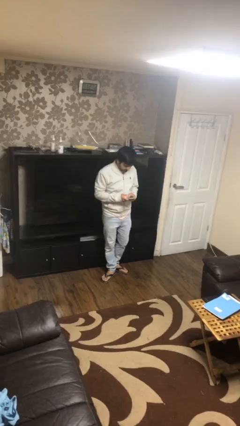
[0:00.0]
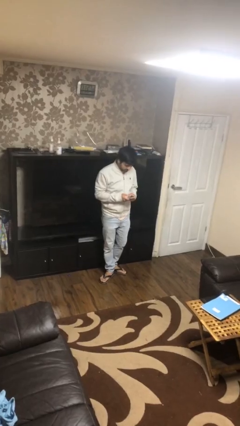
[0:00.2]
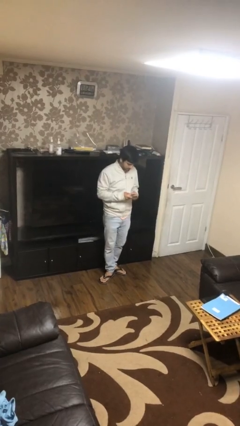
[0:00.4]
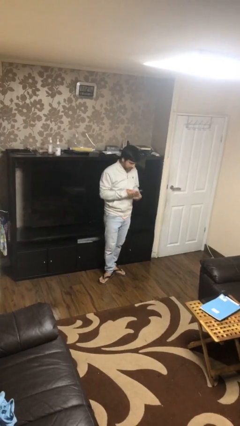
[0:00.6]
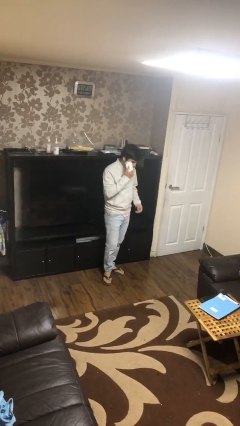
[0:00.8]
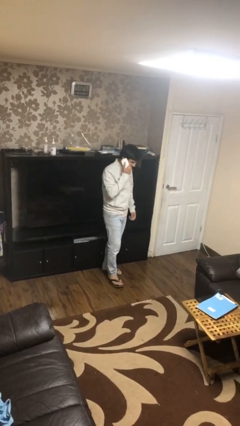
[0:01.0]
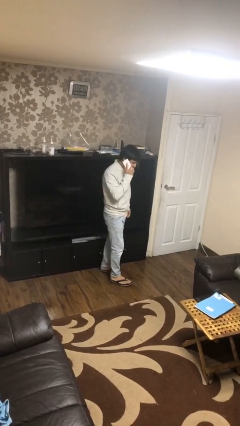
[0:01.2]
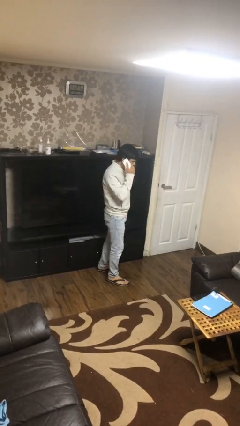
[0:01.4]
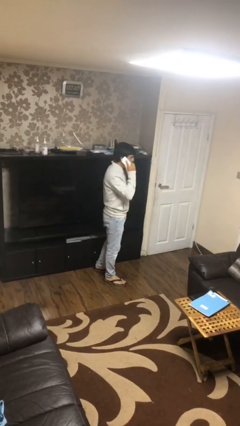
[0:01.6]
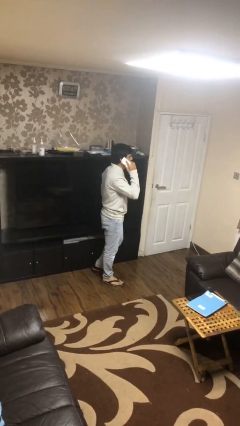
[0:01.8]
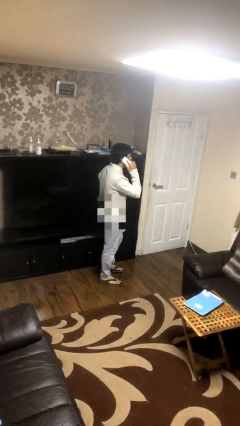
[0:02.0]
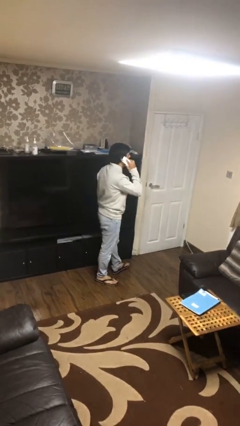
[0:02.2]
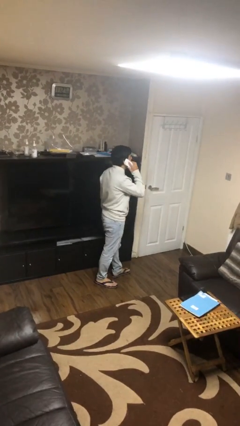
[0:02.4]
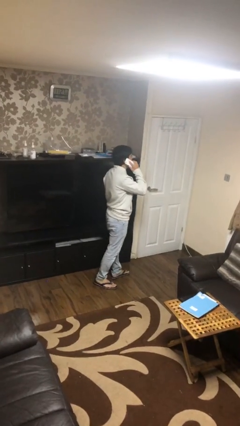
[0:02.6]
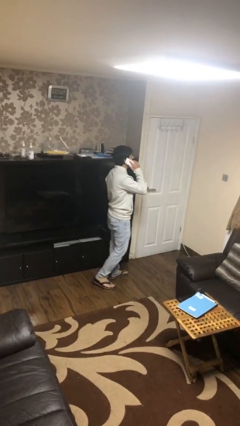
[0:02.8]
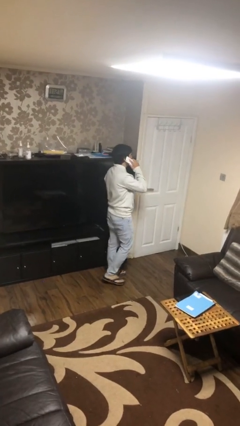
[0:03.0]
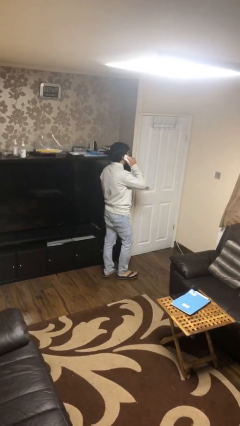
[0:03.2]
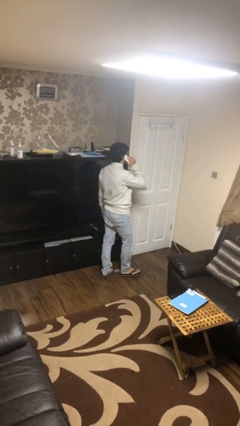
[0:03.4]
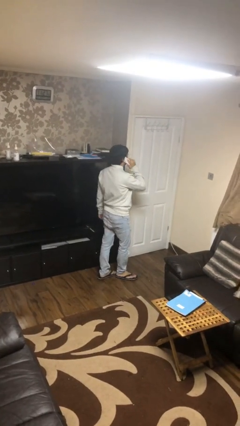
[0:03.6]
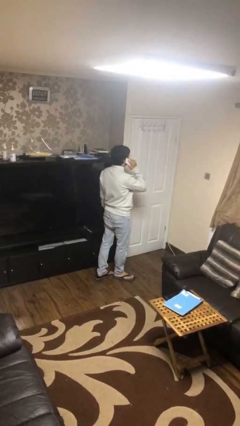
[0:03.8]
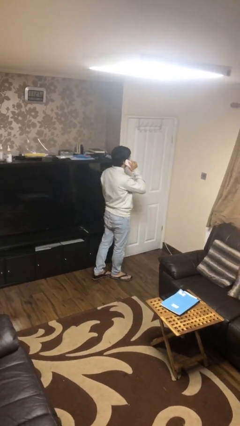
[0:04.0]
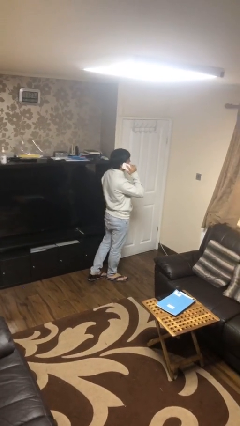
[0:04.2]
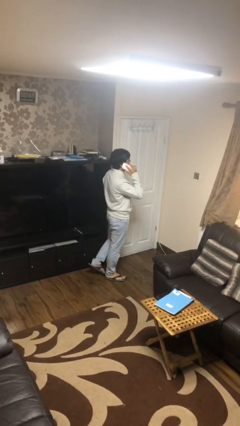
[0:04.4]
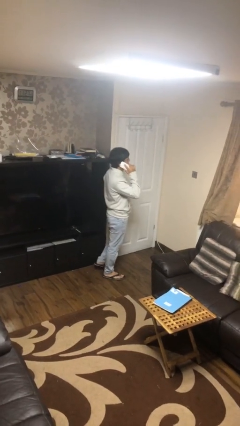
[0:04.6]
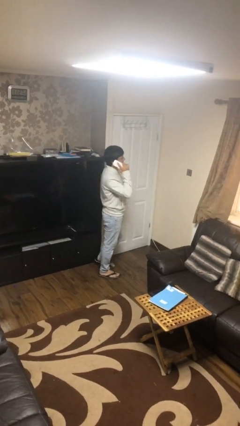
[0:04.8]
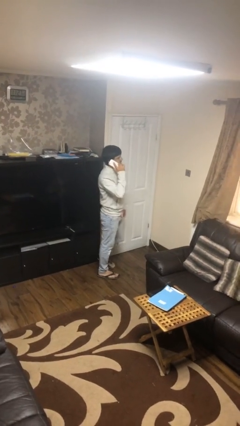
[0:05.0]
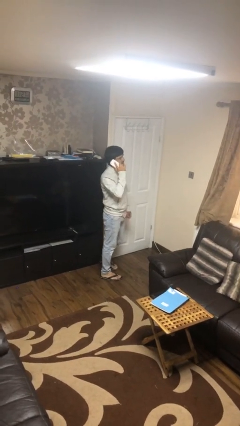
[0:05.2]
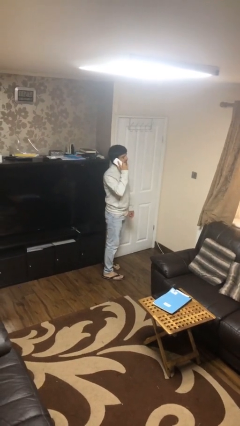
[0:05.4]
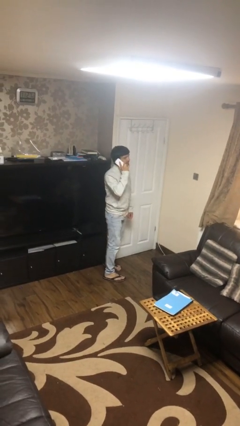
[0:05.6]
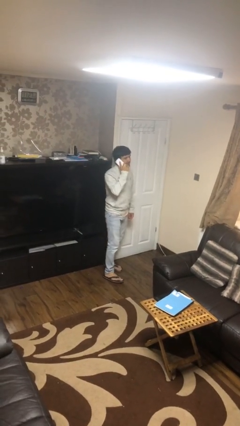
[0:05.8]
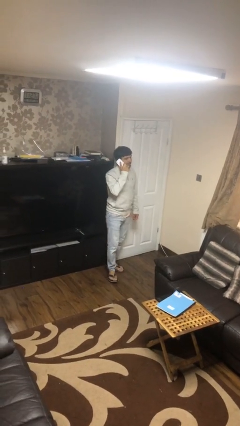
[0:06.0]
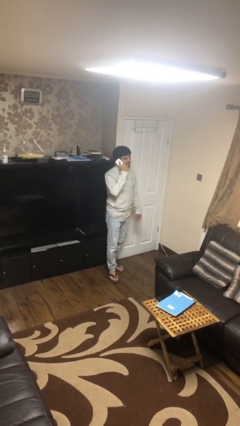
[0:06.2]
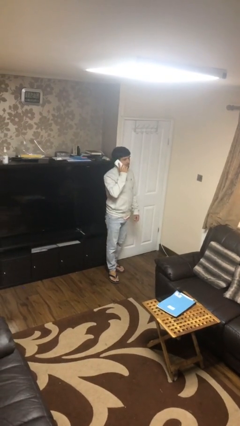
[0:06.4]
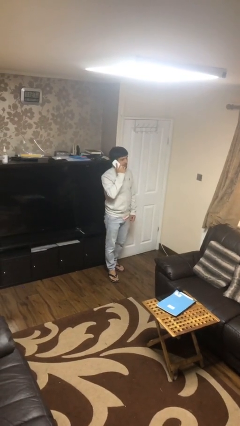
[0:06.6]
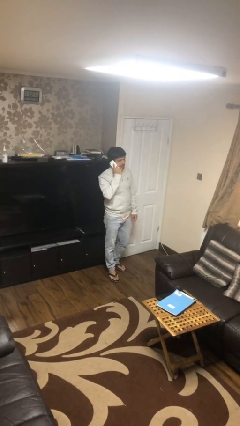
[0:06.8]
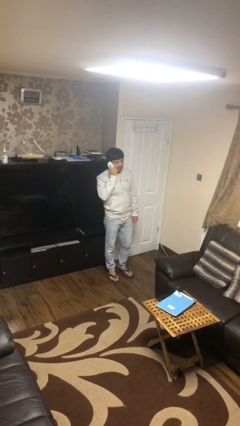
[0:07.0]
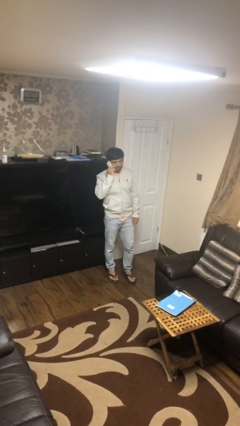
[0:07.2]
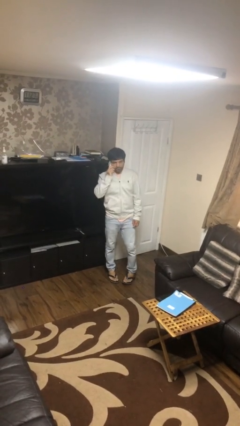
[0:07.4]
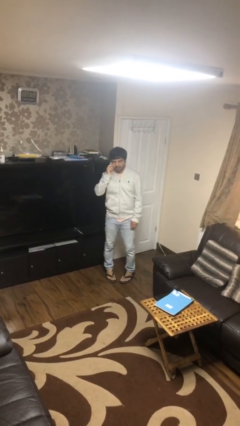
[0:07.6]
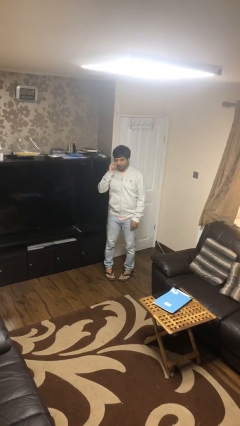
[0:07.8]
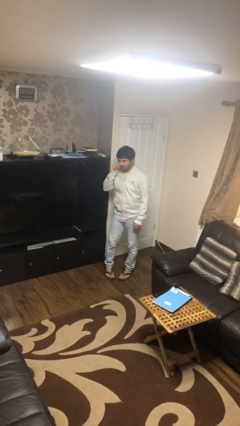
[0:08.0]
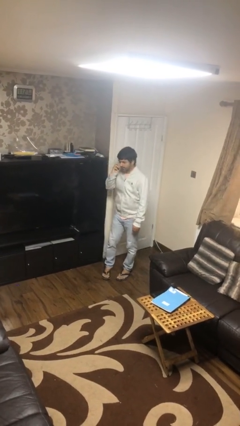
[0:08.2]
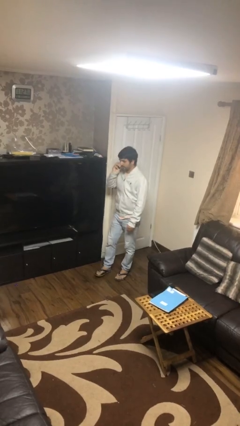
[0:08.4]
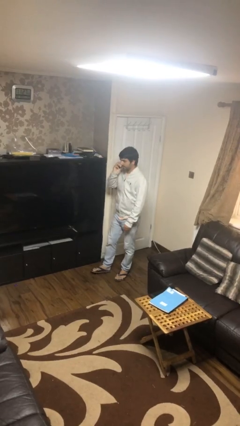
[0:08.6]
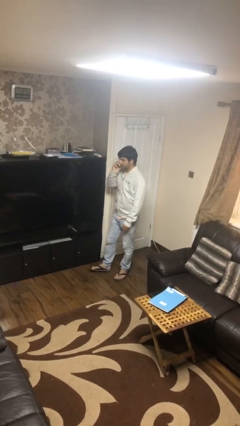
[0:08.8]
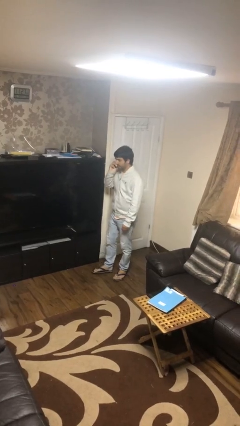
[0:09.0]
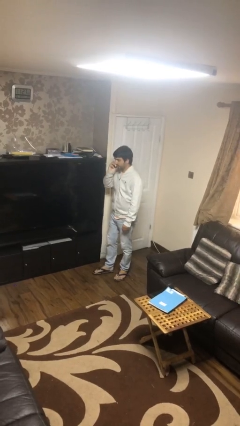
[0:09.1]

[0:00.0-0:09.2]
person talks on phone

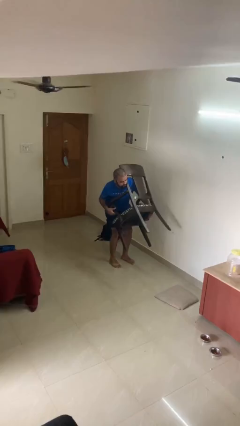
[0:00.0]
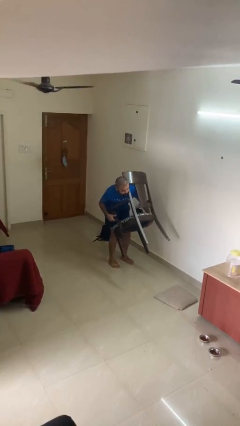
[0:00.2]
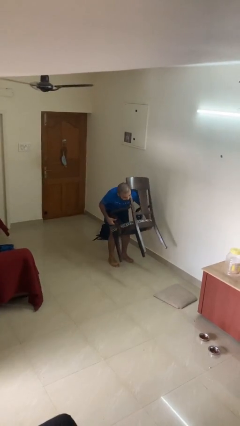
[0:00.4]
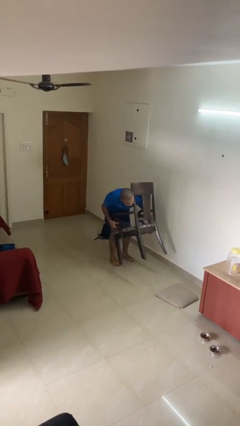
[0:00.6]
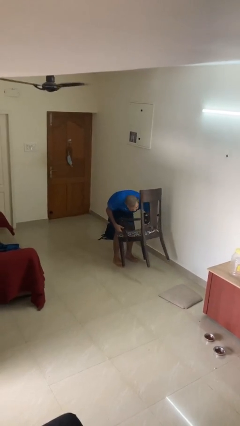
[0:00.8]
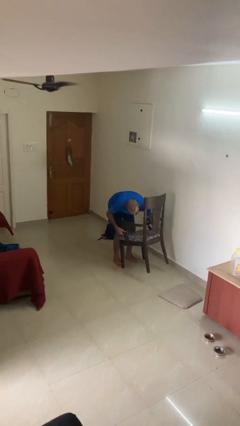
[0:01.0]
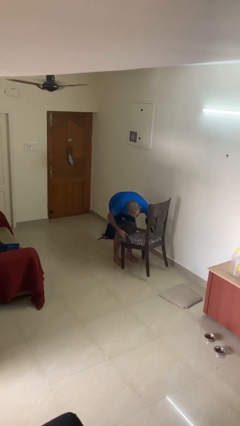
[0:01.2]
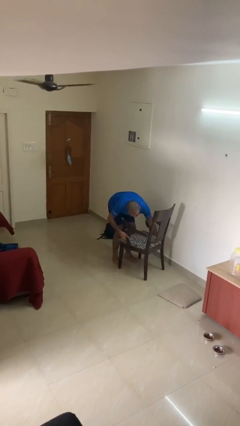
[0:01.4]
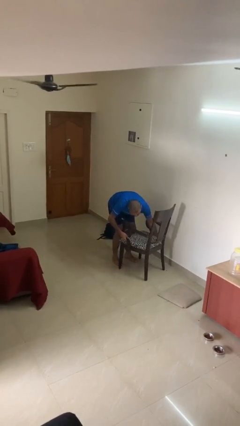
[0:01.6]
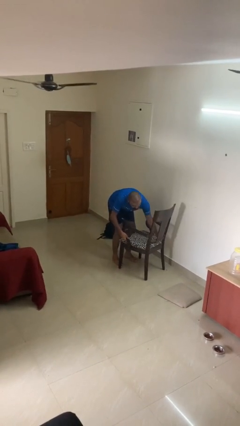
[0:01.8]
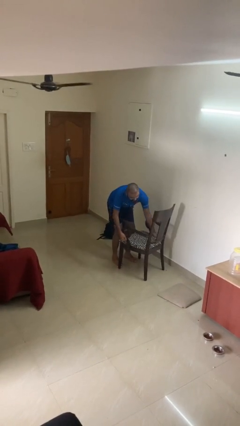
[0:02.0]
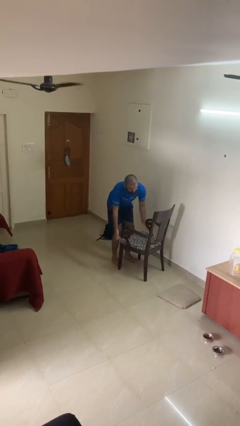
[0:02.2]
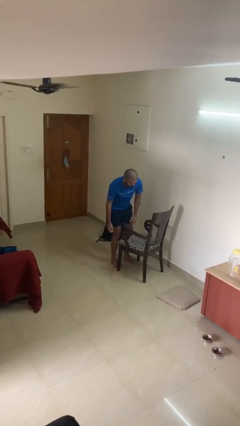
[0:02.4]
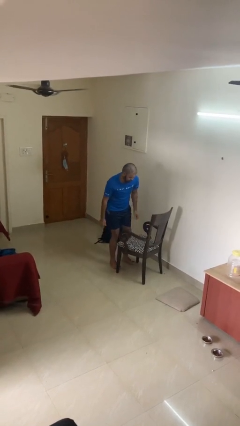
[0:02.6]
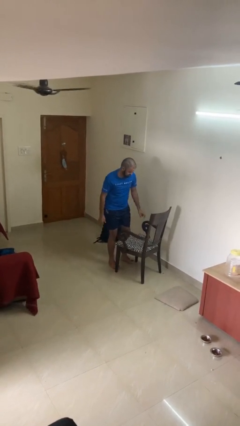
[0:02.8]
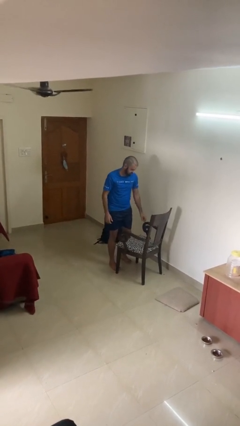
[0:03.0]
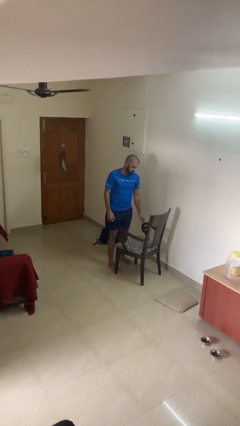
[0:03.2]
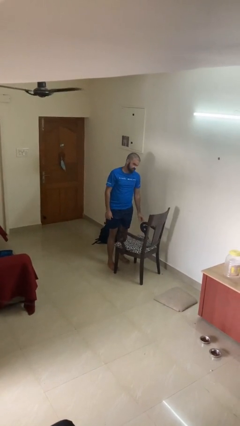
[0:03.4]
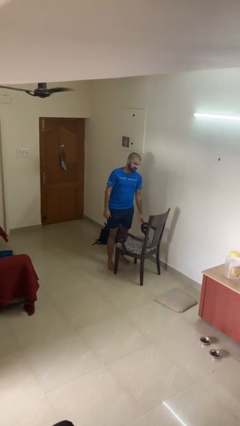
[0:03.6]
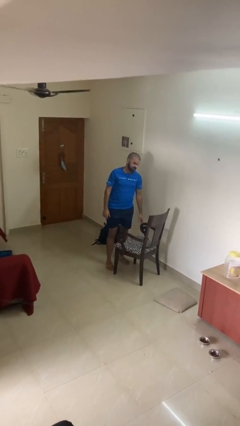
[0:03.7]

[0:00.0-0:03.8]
person puts down object on floor

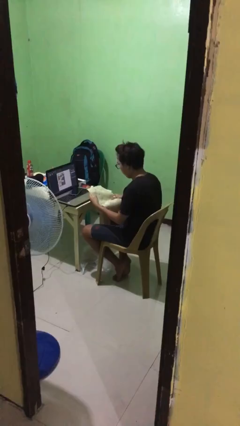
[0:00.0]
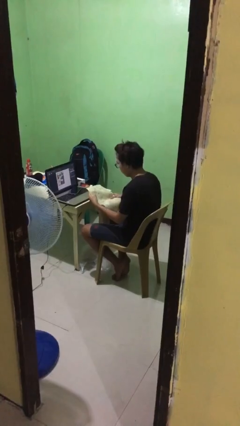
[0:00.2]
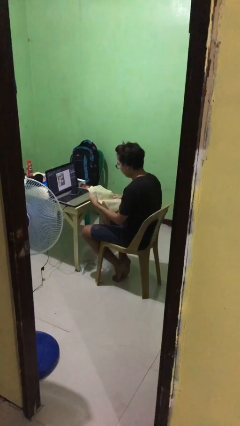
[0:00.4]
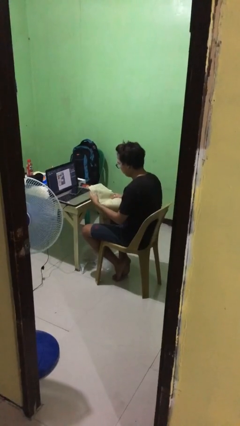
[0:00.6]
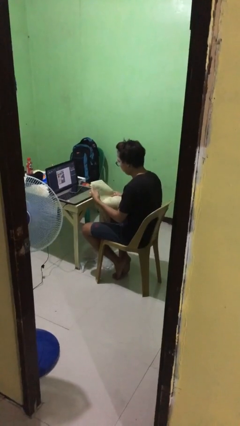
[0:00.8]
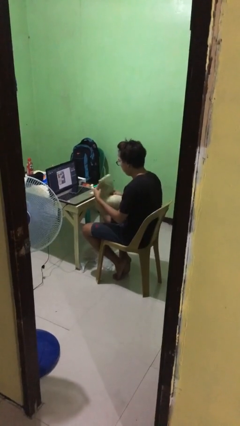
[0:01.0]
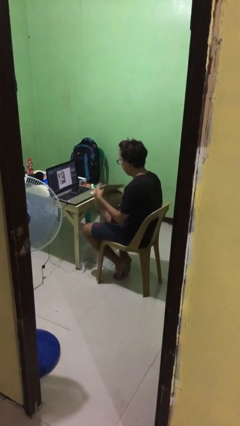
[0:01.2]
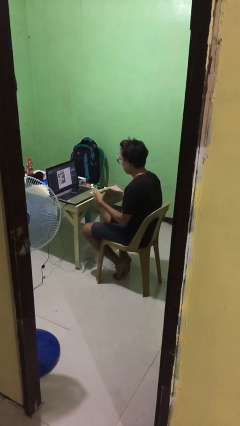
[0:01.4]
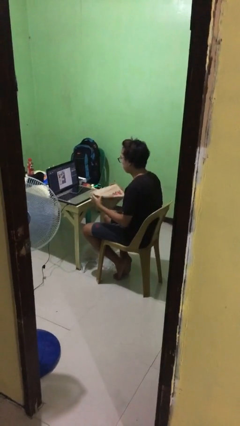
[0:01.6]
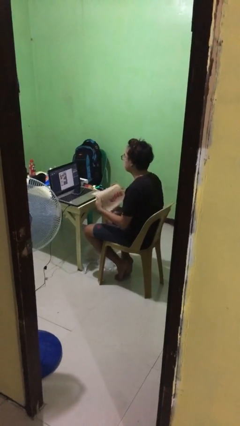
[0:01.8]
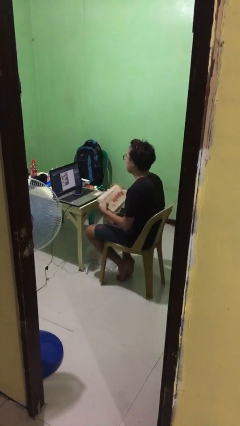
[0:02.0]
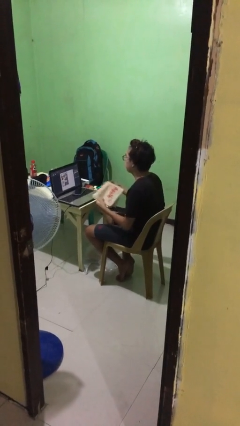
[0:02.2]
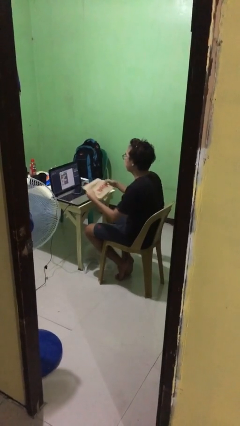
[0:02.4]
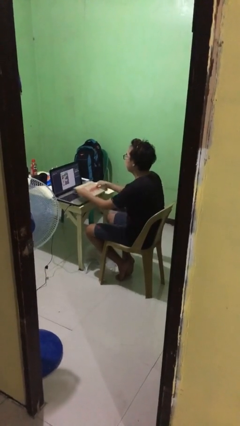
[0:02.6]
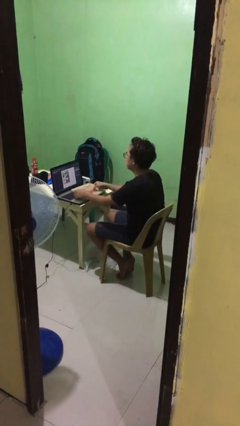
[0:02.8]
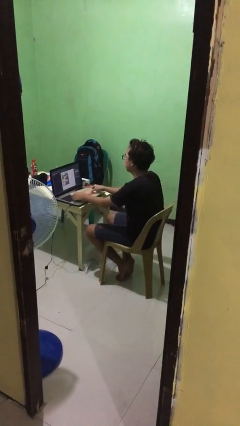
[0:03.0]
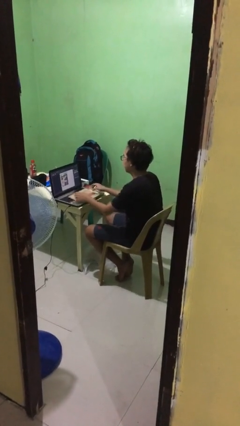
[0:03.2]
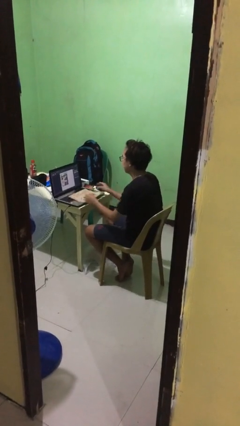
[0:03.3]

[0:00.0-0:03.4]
person puts down object on table

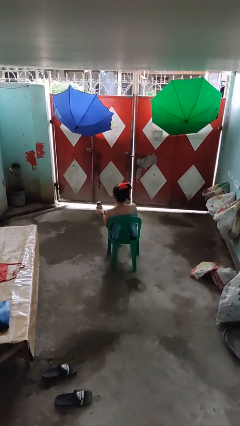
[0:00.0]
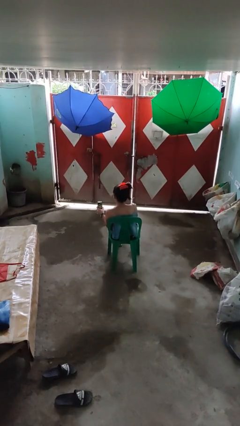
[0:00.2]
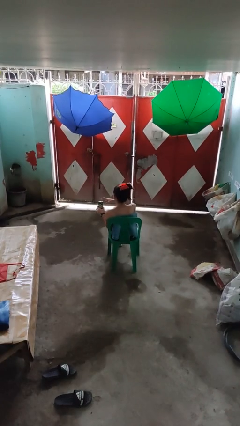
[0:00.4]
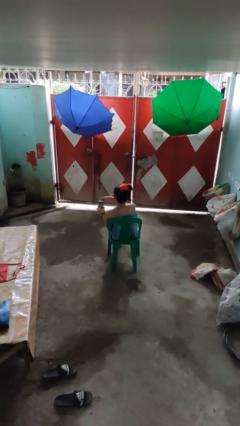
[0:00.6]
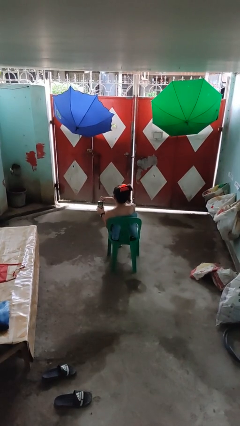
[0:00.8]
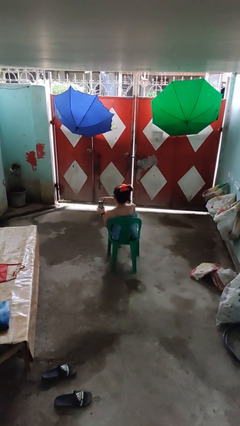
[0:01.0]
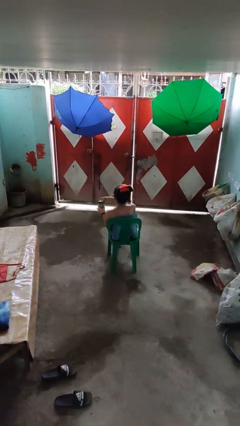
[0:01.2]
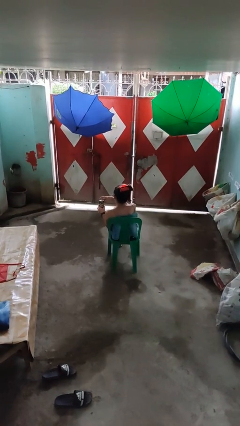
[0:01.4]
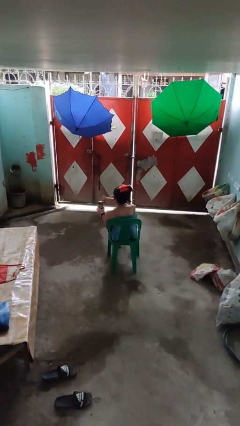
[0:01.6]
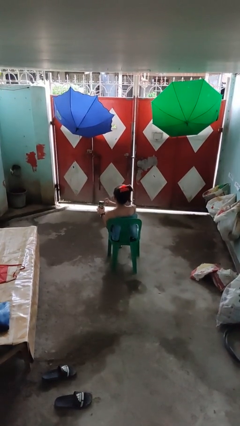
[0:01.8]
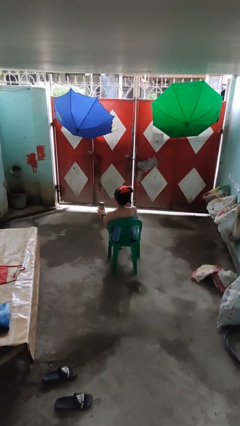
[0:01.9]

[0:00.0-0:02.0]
person opens beverage can
